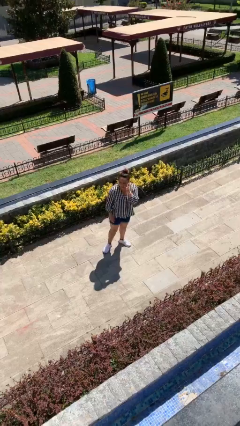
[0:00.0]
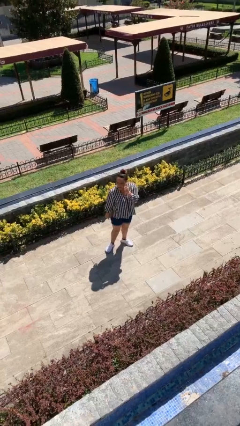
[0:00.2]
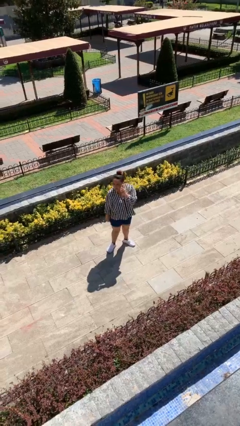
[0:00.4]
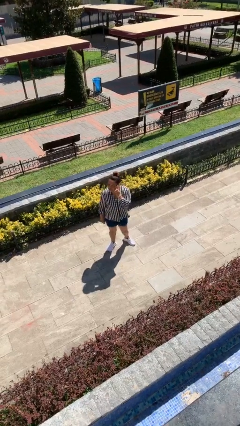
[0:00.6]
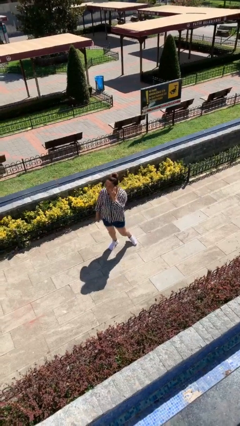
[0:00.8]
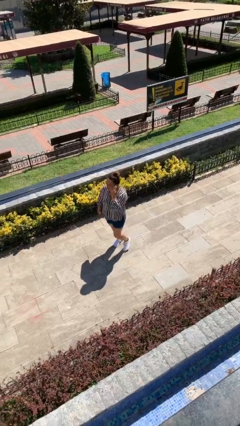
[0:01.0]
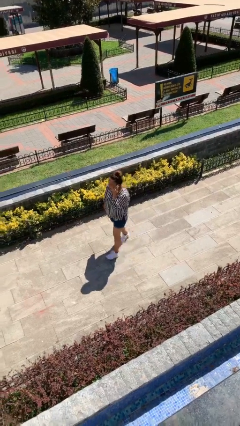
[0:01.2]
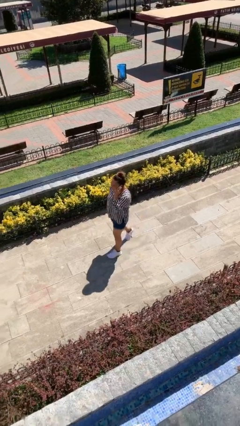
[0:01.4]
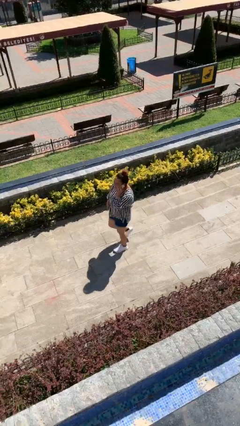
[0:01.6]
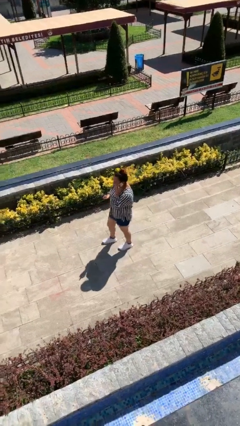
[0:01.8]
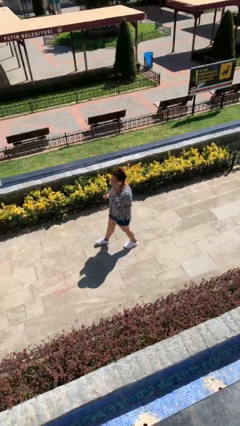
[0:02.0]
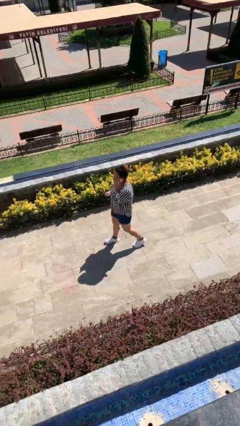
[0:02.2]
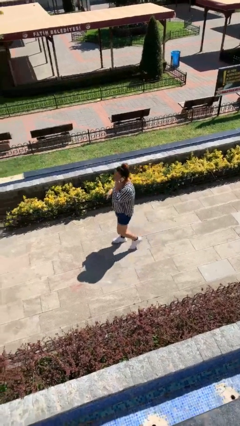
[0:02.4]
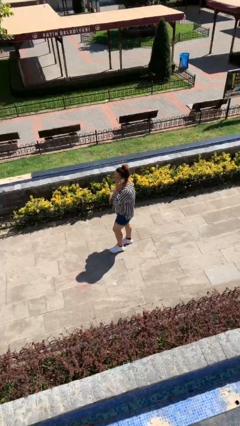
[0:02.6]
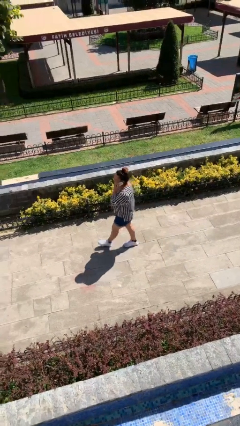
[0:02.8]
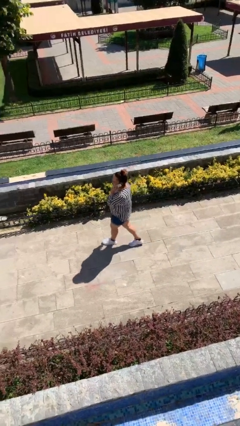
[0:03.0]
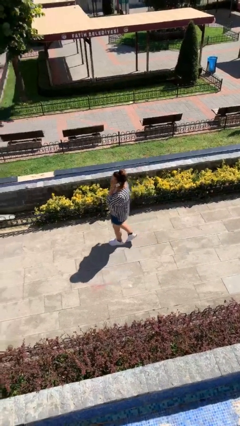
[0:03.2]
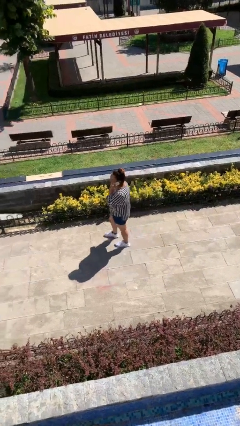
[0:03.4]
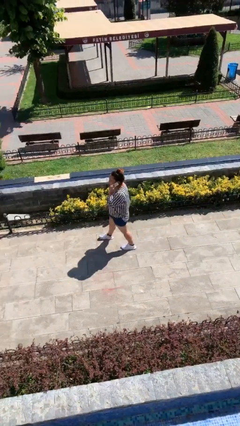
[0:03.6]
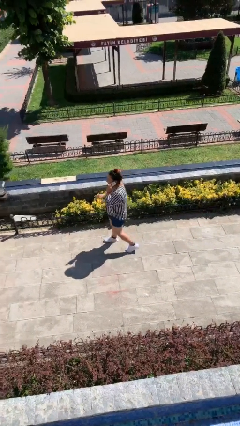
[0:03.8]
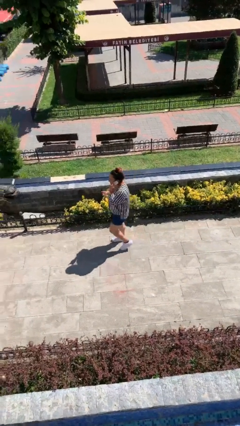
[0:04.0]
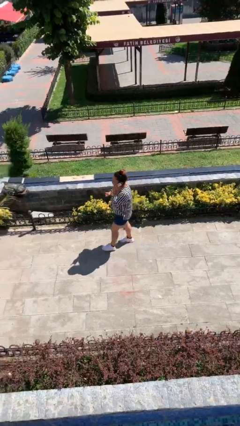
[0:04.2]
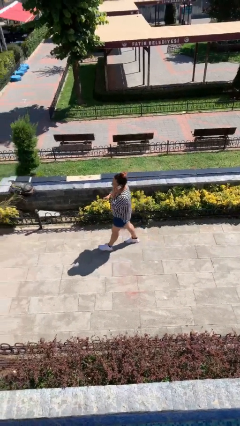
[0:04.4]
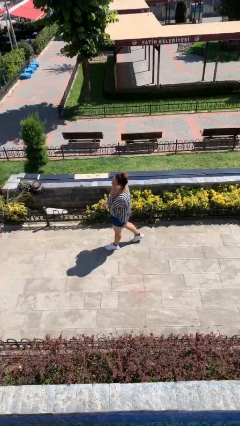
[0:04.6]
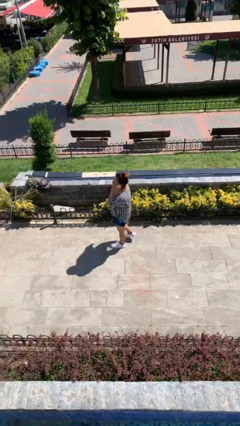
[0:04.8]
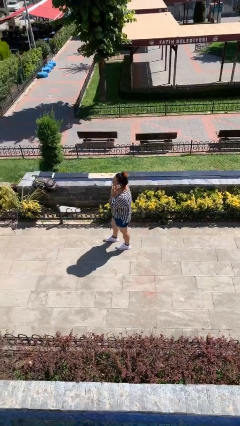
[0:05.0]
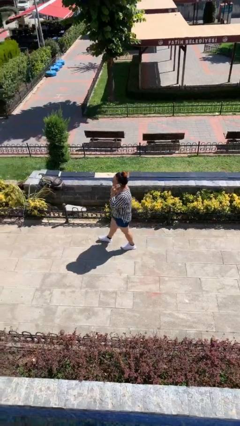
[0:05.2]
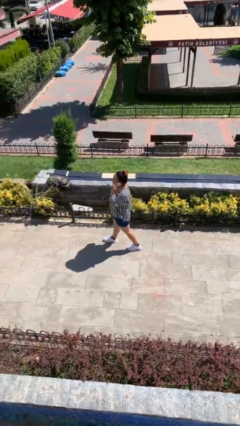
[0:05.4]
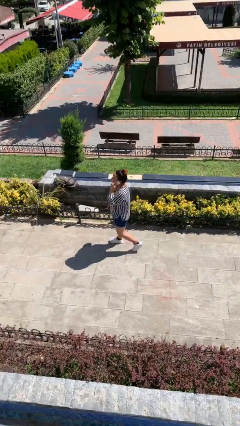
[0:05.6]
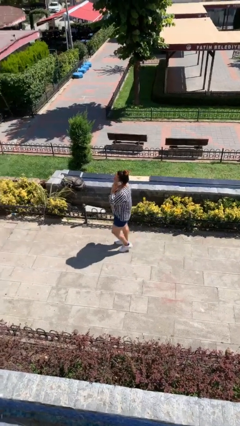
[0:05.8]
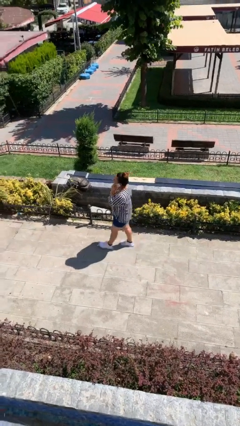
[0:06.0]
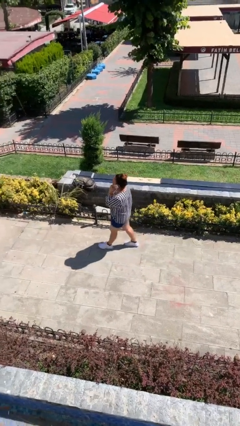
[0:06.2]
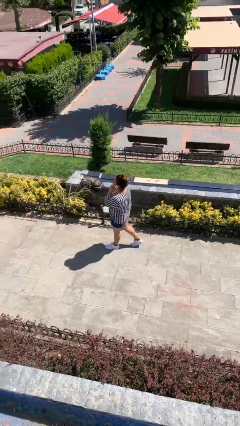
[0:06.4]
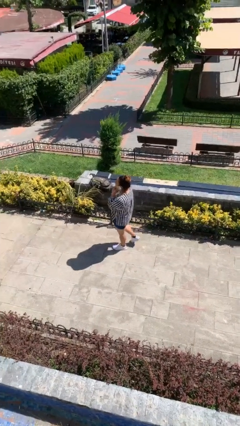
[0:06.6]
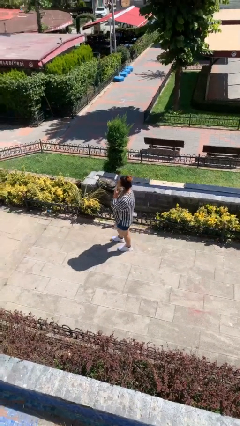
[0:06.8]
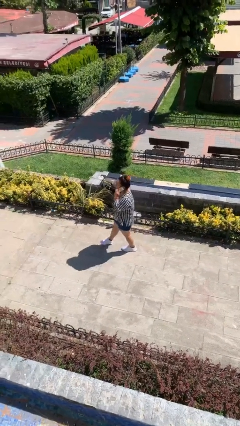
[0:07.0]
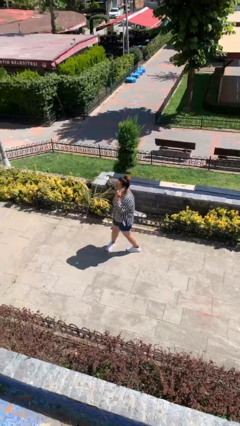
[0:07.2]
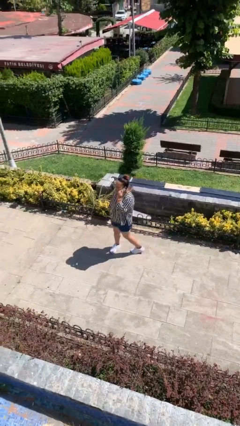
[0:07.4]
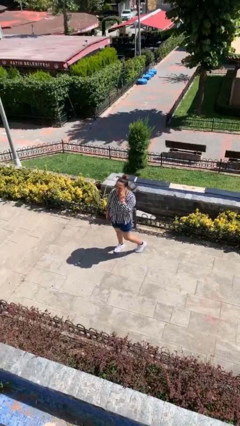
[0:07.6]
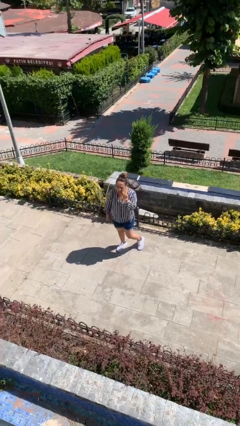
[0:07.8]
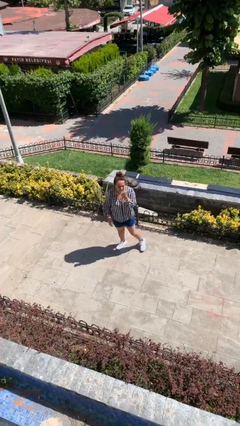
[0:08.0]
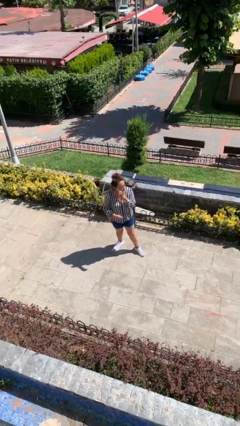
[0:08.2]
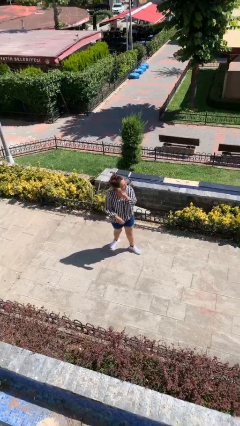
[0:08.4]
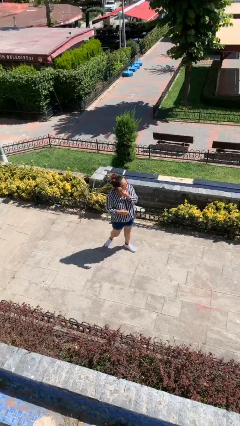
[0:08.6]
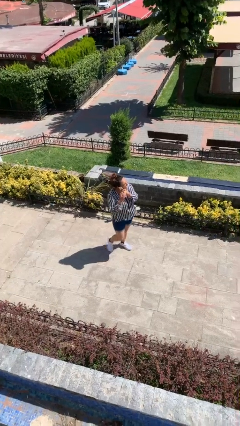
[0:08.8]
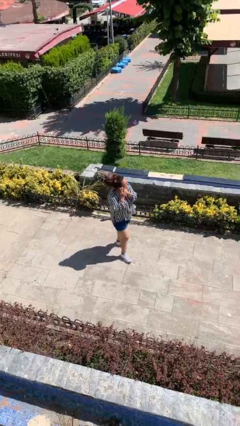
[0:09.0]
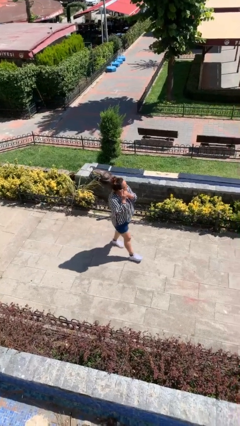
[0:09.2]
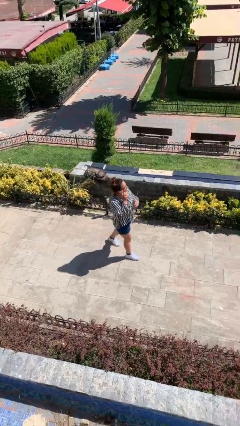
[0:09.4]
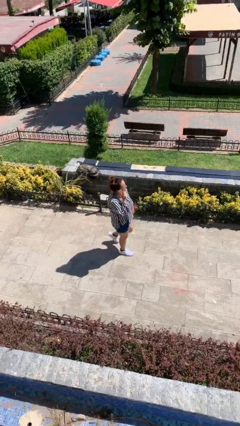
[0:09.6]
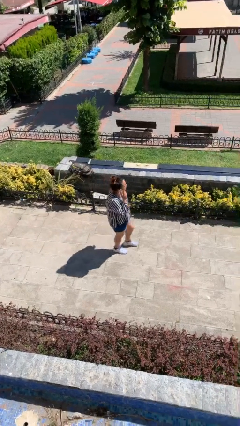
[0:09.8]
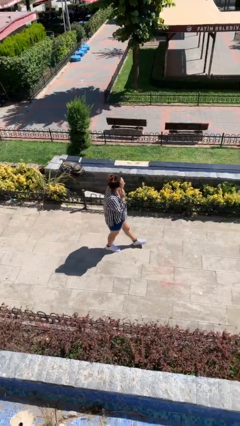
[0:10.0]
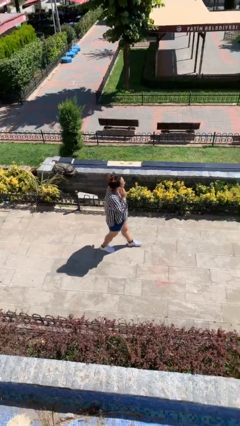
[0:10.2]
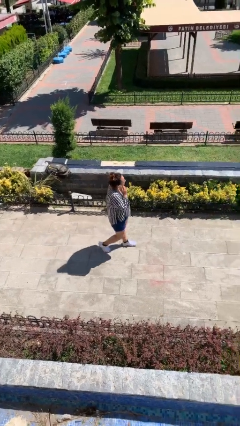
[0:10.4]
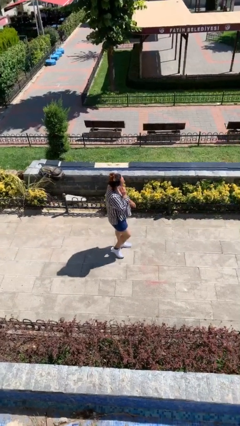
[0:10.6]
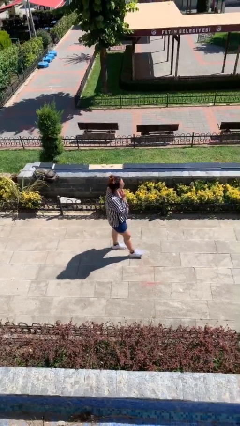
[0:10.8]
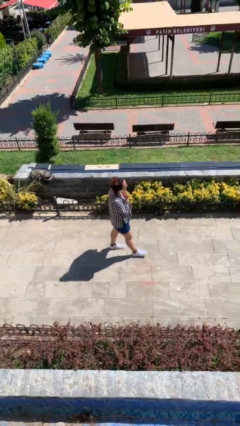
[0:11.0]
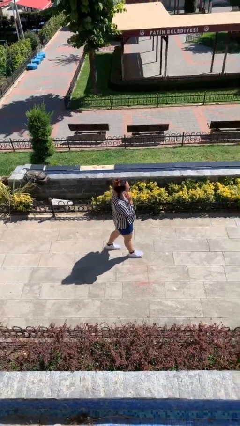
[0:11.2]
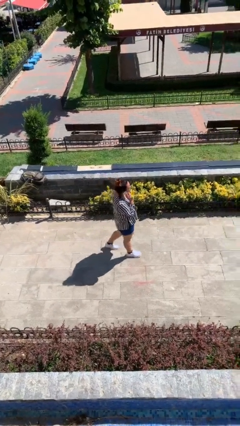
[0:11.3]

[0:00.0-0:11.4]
person talks on phone

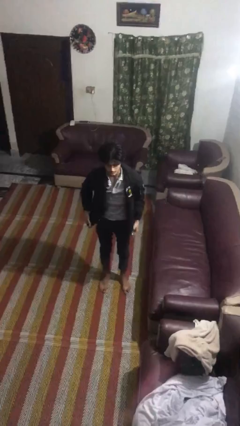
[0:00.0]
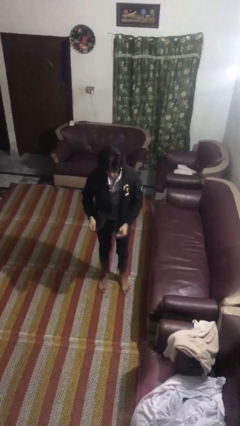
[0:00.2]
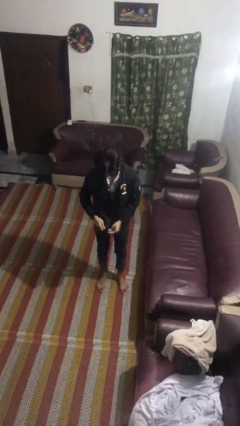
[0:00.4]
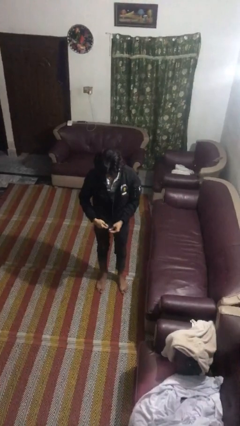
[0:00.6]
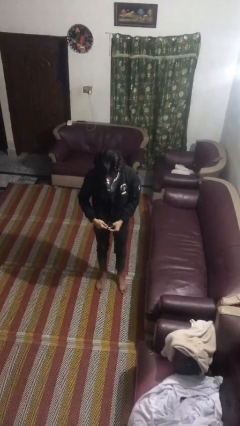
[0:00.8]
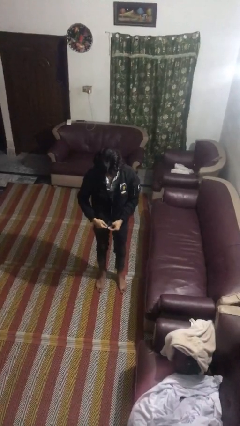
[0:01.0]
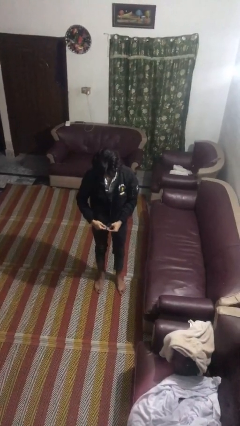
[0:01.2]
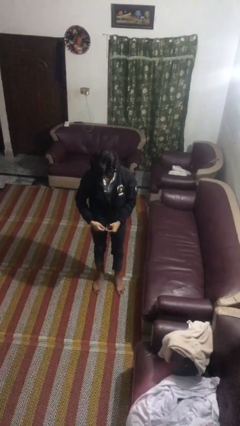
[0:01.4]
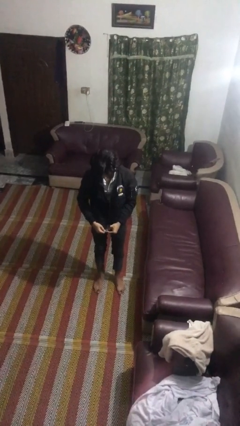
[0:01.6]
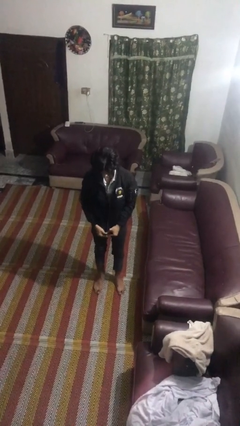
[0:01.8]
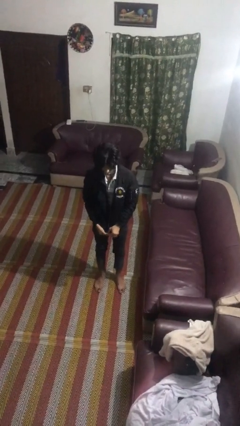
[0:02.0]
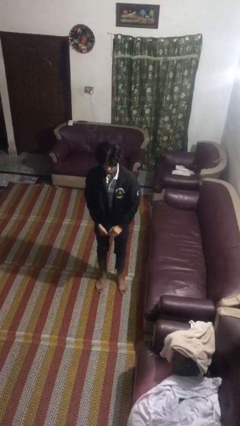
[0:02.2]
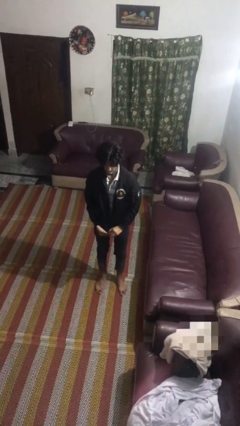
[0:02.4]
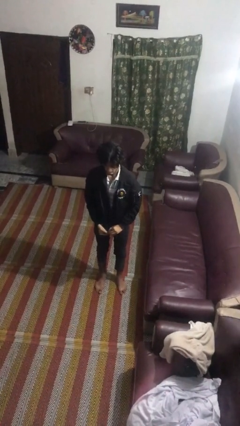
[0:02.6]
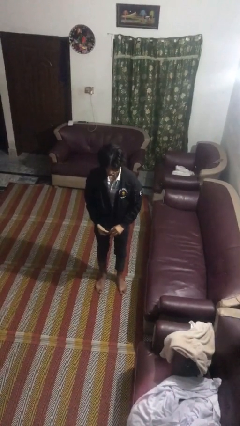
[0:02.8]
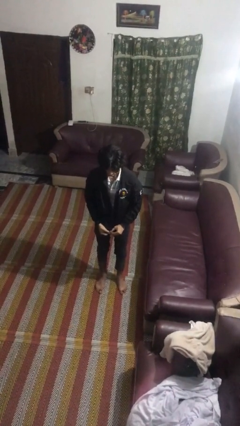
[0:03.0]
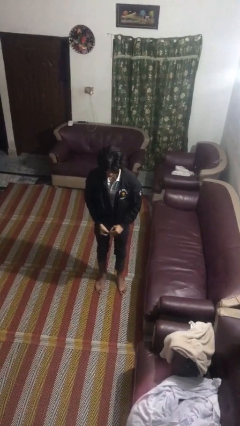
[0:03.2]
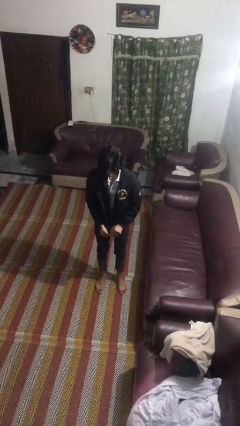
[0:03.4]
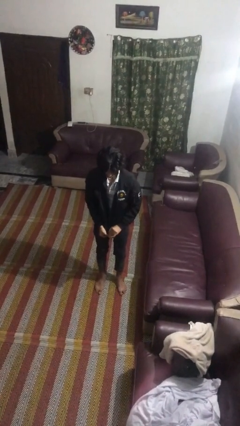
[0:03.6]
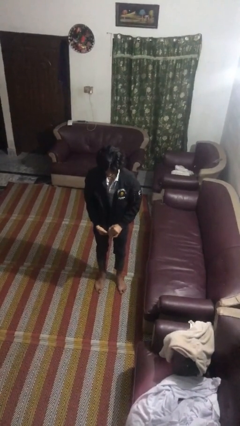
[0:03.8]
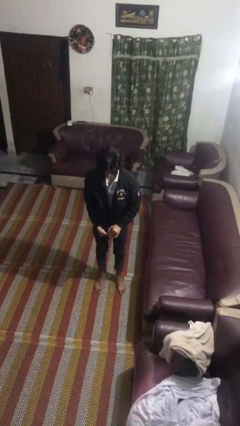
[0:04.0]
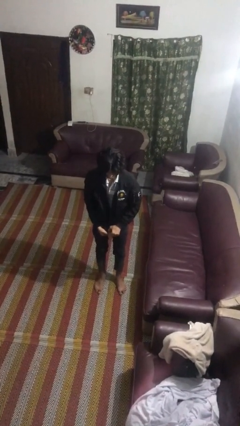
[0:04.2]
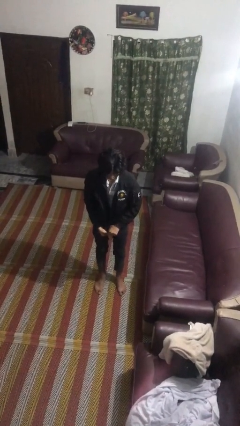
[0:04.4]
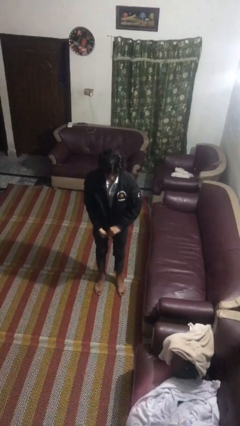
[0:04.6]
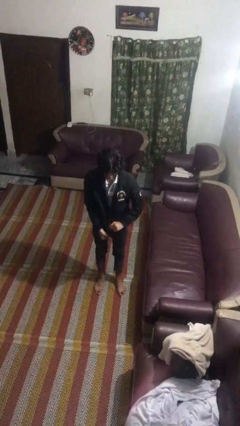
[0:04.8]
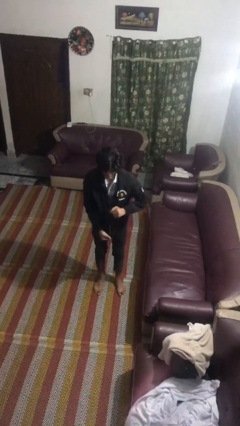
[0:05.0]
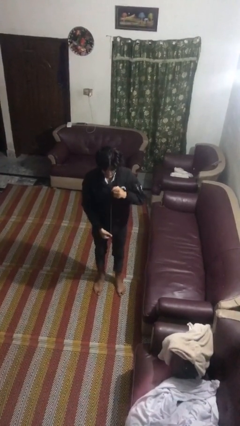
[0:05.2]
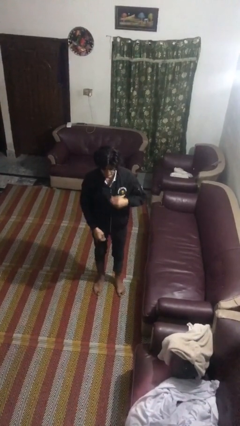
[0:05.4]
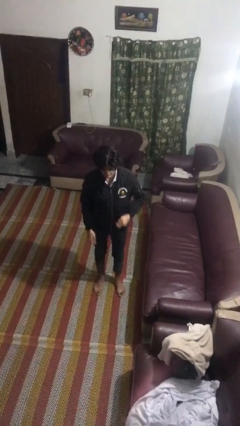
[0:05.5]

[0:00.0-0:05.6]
person zips up jacket

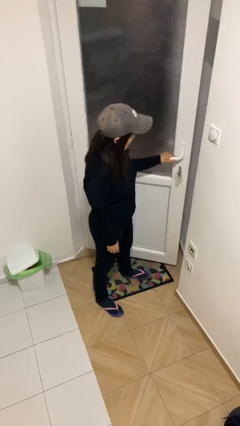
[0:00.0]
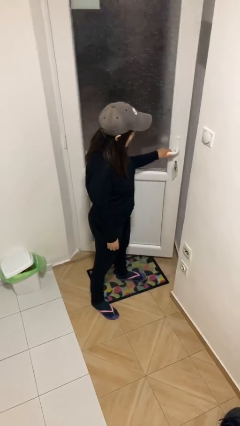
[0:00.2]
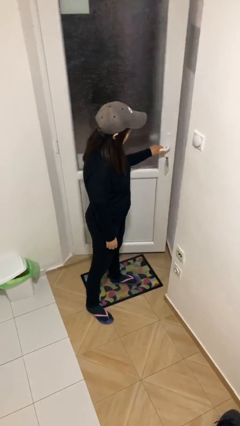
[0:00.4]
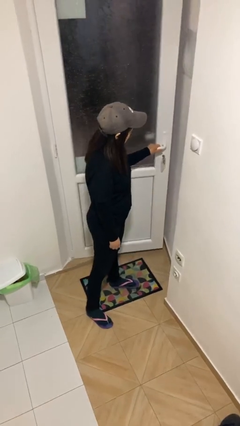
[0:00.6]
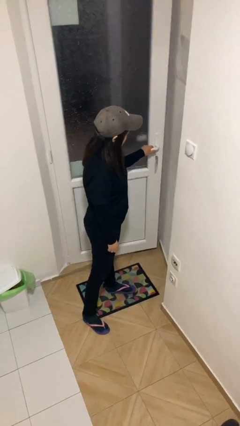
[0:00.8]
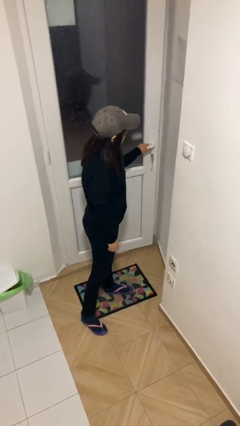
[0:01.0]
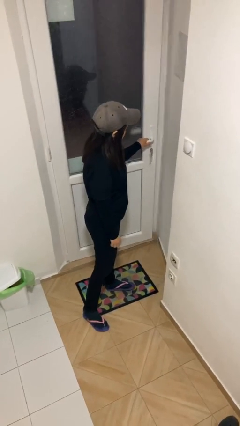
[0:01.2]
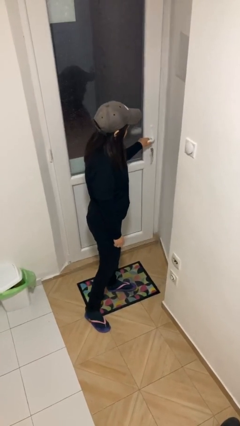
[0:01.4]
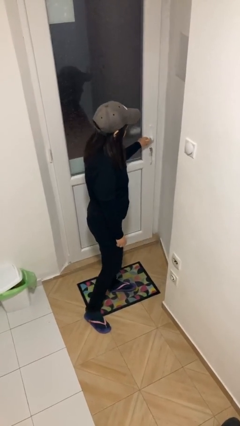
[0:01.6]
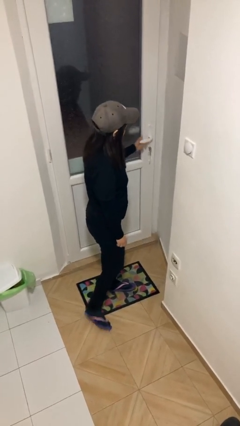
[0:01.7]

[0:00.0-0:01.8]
person closes facility door
